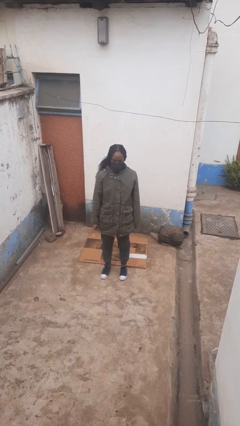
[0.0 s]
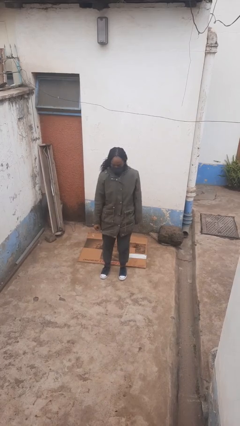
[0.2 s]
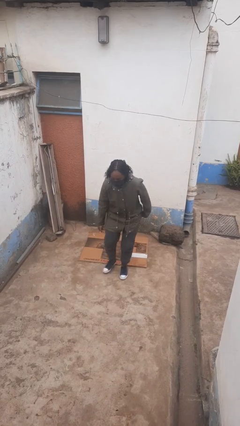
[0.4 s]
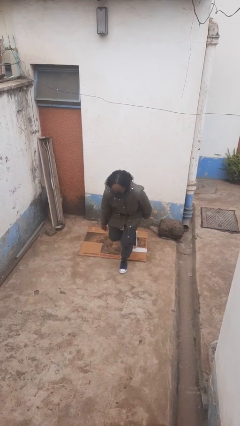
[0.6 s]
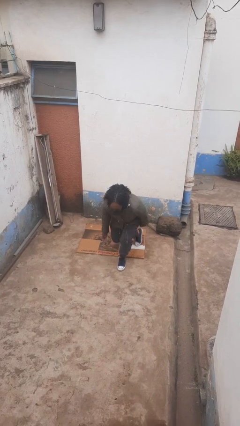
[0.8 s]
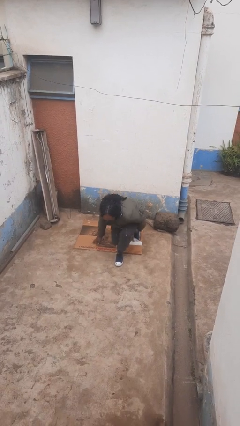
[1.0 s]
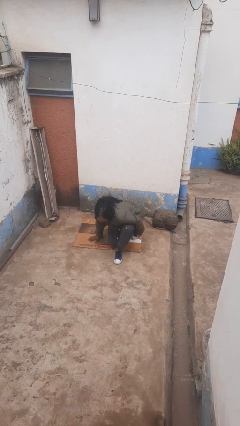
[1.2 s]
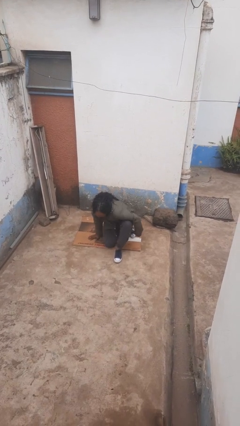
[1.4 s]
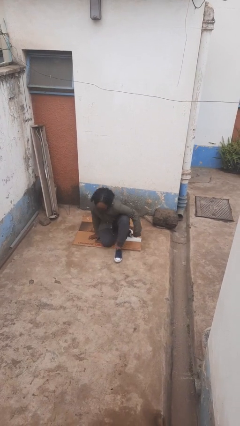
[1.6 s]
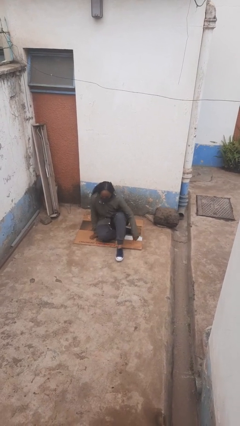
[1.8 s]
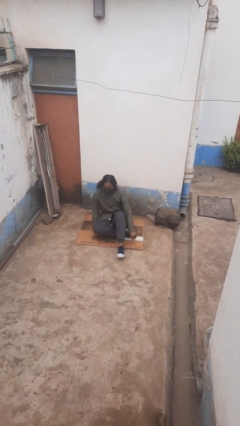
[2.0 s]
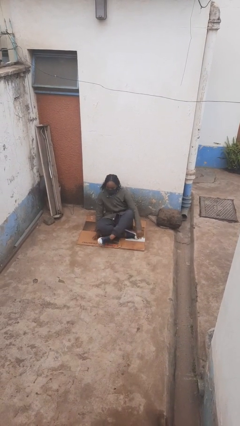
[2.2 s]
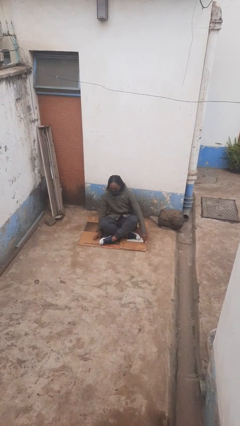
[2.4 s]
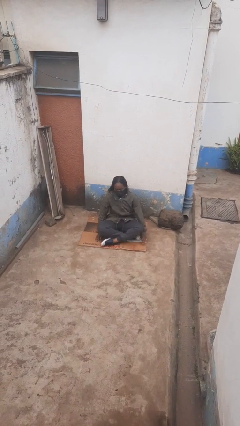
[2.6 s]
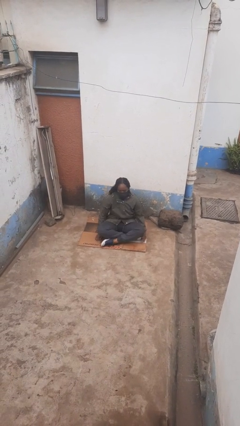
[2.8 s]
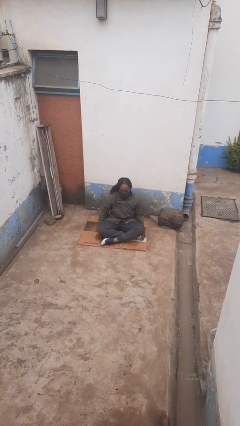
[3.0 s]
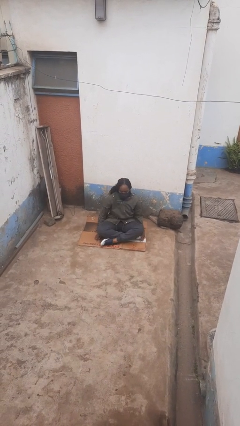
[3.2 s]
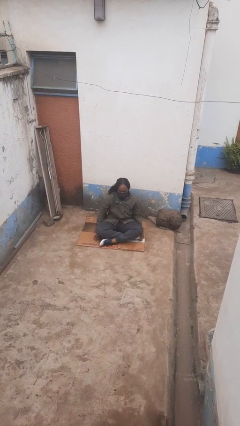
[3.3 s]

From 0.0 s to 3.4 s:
person sits crisscross

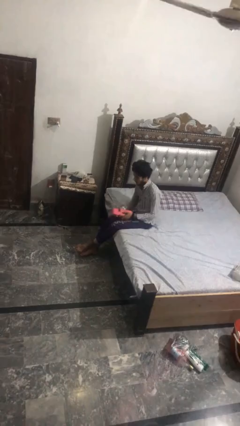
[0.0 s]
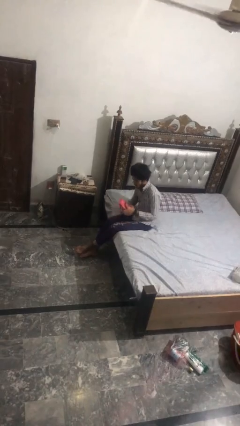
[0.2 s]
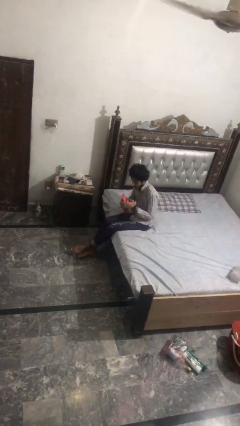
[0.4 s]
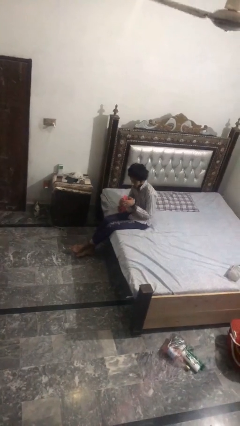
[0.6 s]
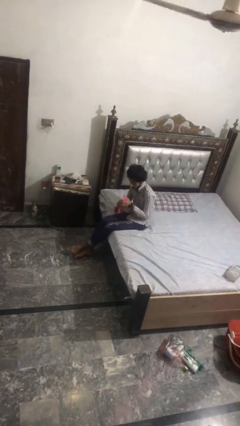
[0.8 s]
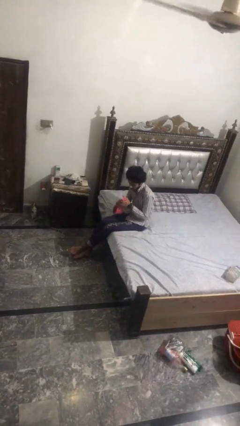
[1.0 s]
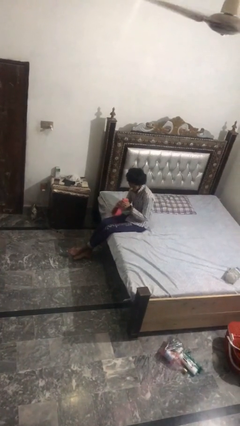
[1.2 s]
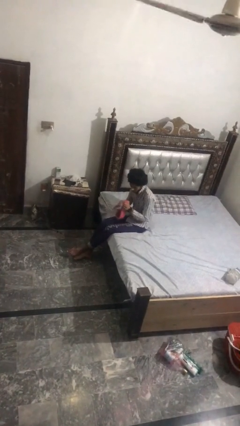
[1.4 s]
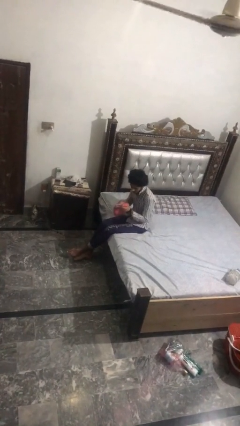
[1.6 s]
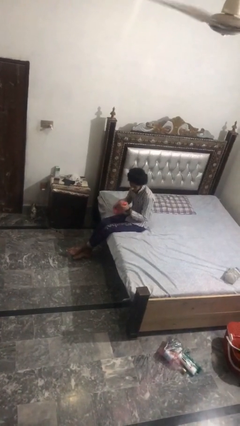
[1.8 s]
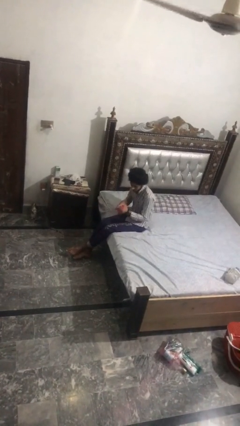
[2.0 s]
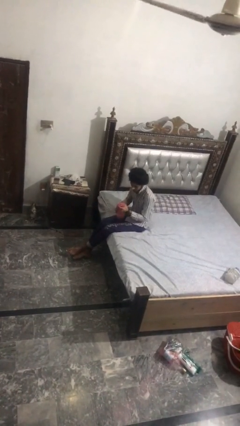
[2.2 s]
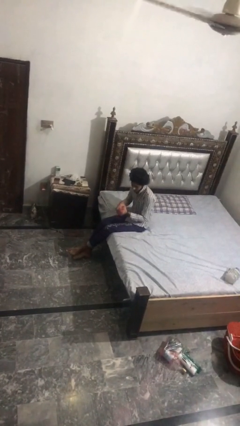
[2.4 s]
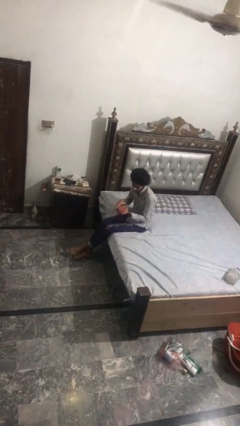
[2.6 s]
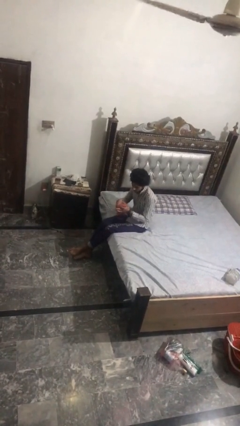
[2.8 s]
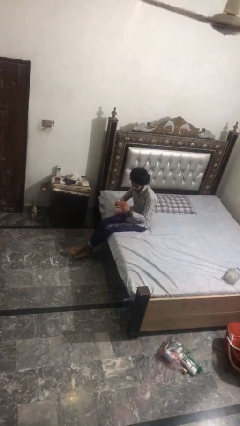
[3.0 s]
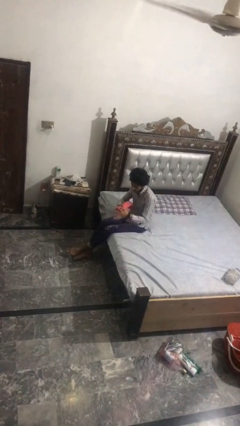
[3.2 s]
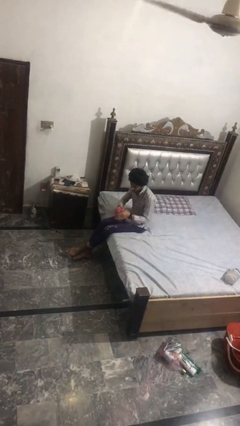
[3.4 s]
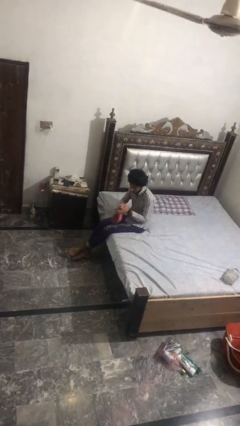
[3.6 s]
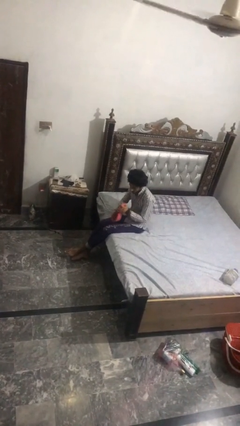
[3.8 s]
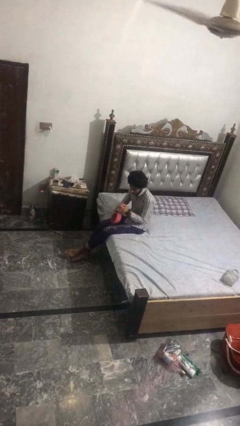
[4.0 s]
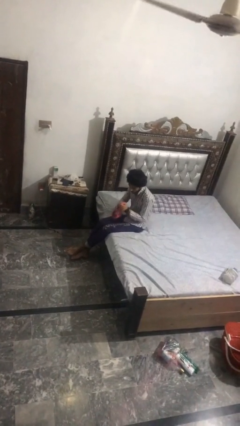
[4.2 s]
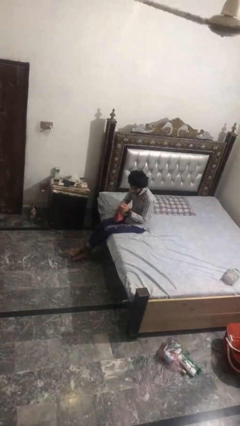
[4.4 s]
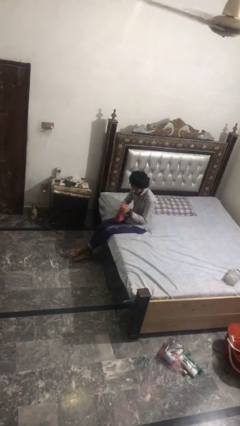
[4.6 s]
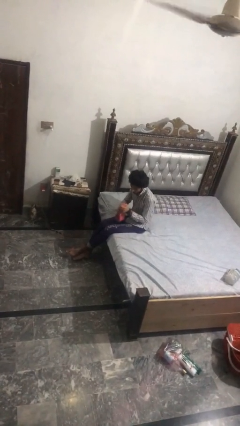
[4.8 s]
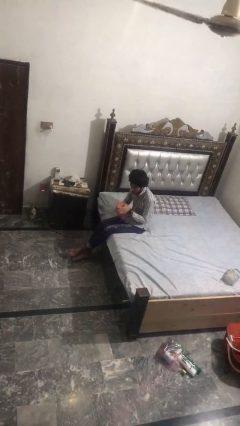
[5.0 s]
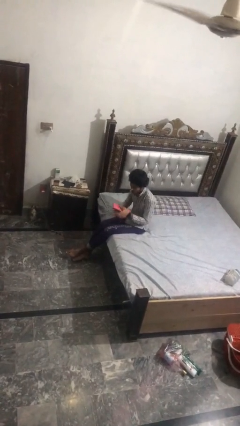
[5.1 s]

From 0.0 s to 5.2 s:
person squeezes object

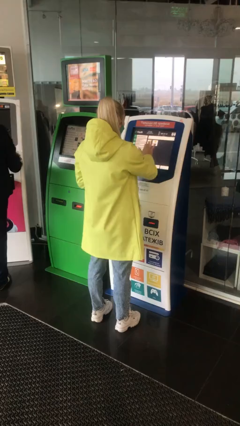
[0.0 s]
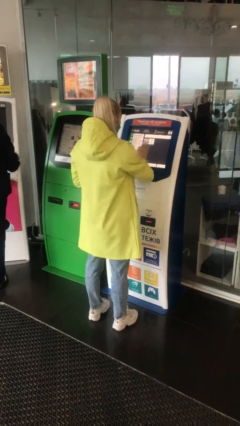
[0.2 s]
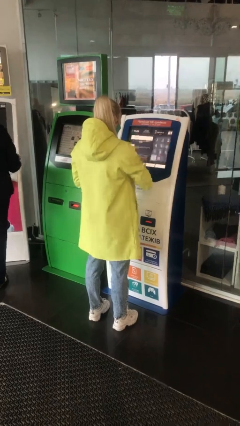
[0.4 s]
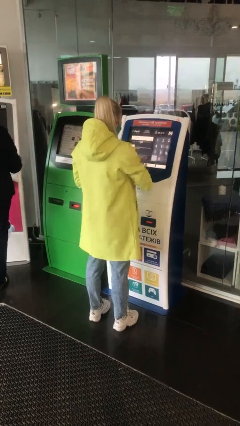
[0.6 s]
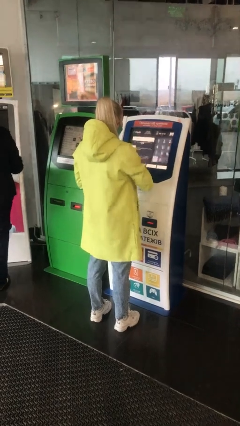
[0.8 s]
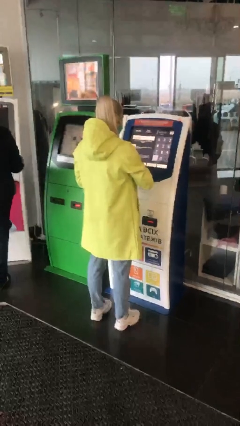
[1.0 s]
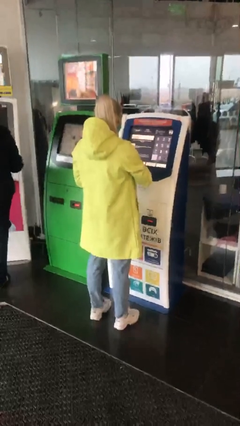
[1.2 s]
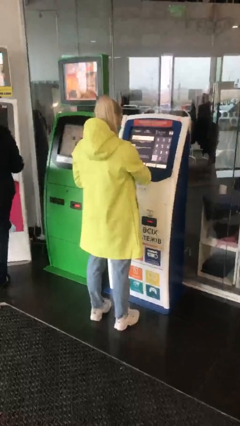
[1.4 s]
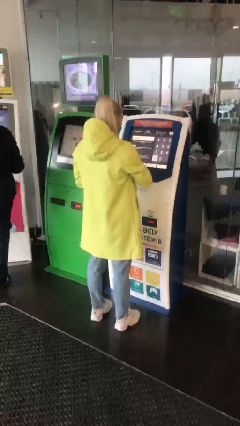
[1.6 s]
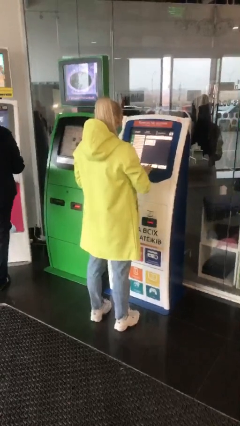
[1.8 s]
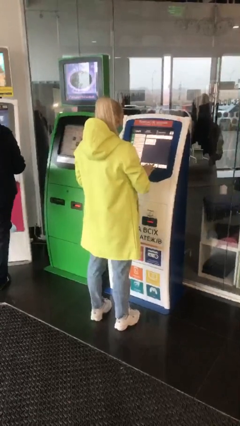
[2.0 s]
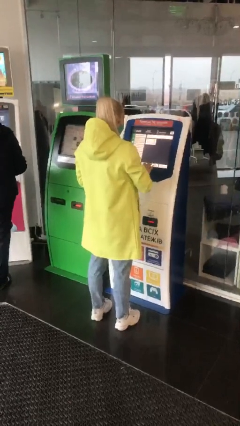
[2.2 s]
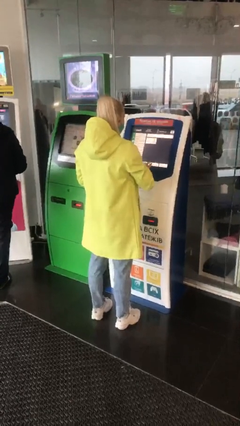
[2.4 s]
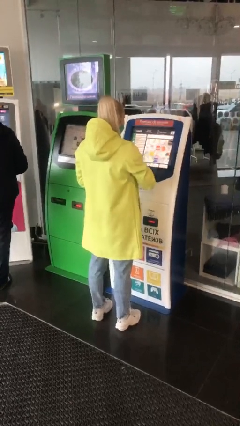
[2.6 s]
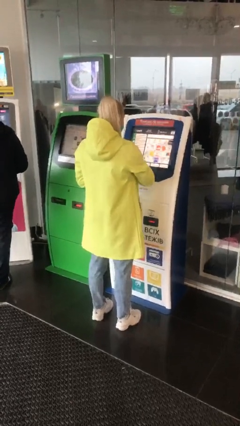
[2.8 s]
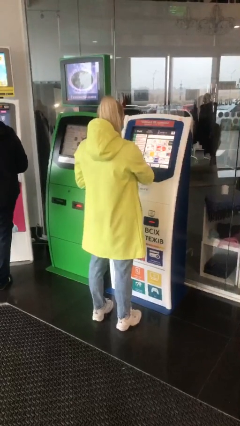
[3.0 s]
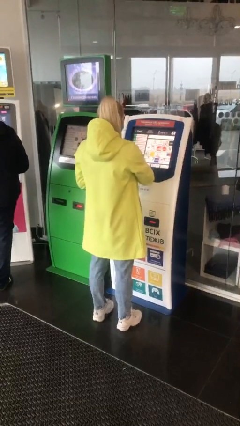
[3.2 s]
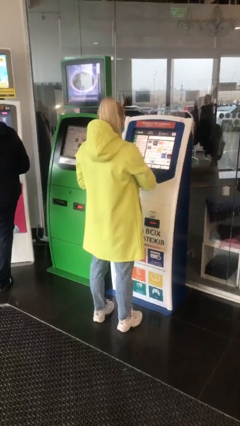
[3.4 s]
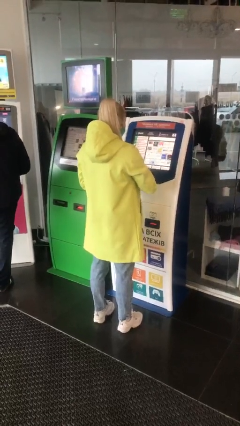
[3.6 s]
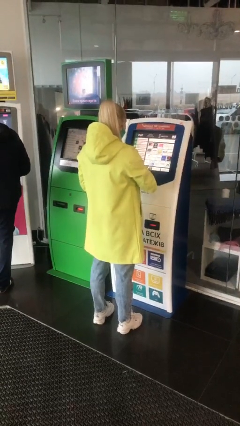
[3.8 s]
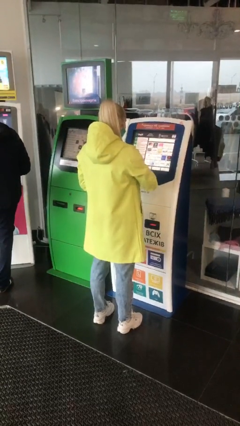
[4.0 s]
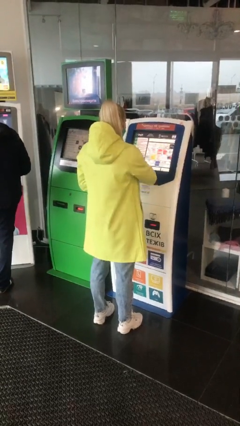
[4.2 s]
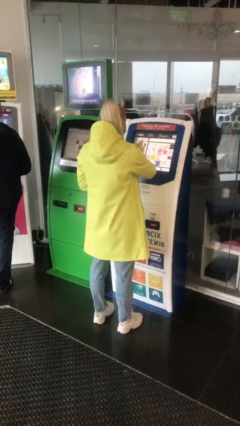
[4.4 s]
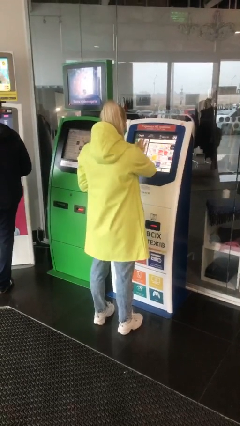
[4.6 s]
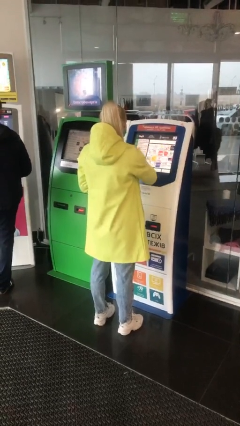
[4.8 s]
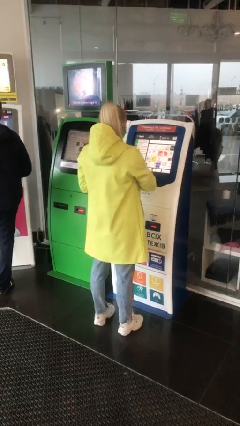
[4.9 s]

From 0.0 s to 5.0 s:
person purchases from machine

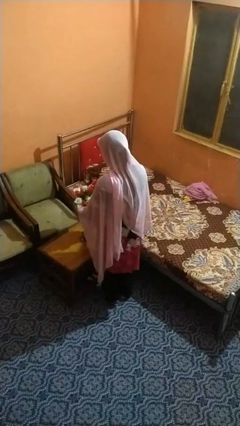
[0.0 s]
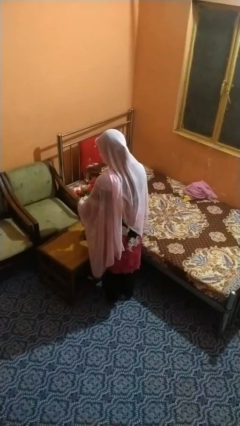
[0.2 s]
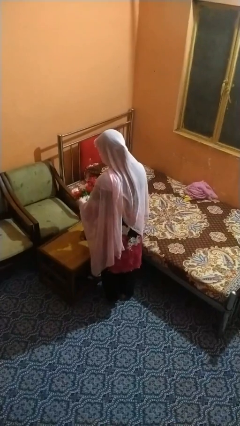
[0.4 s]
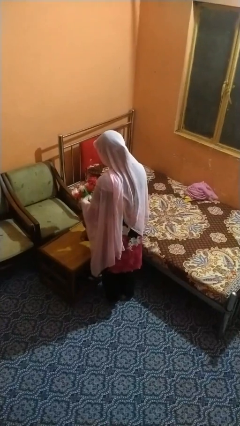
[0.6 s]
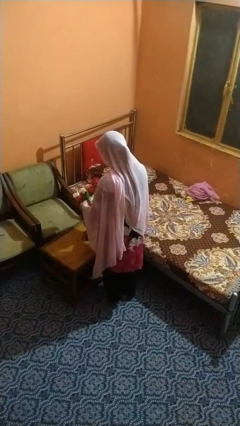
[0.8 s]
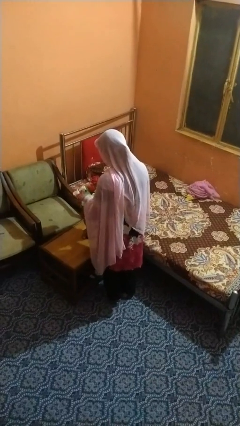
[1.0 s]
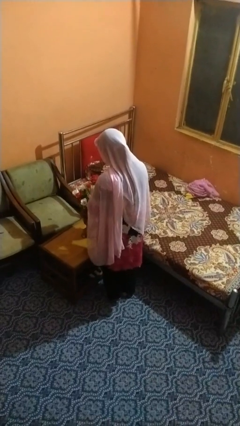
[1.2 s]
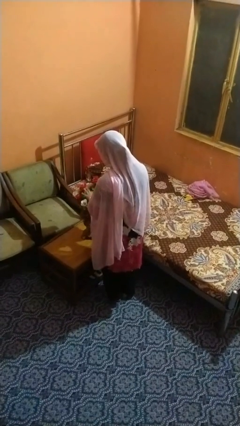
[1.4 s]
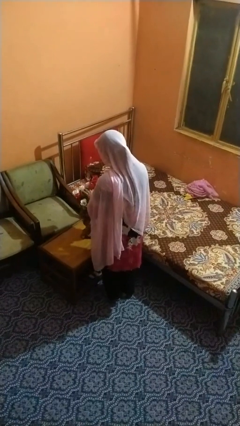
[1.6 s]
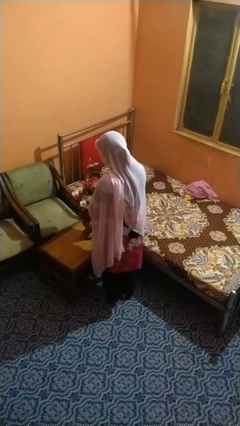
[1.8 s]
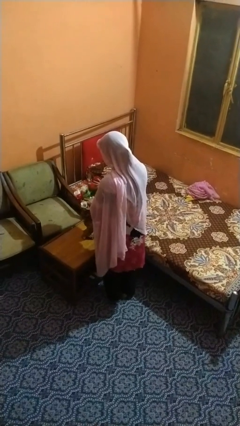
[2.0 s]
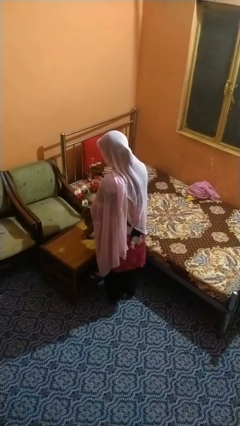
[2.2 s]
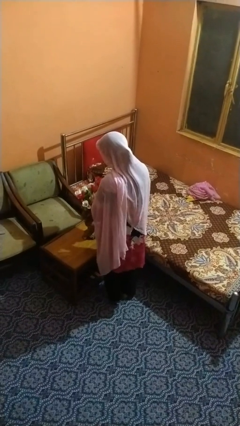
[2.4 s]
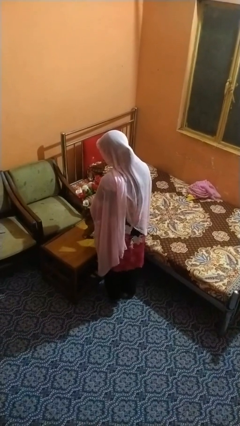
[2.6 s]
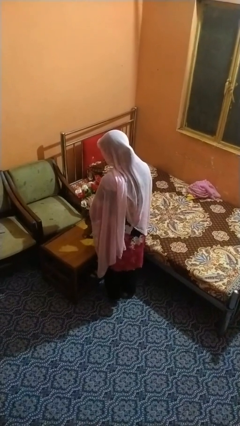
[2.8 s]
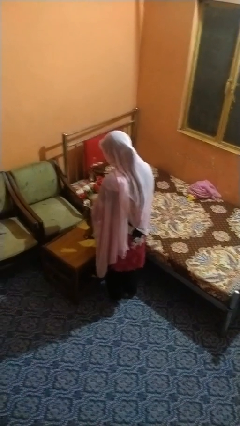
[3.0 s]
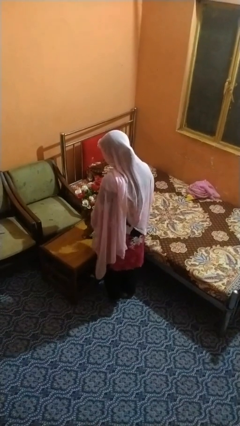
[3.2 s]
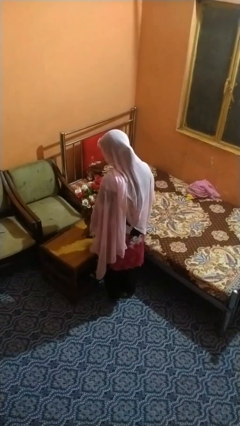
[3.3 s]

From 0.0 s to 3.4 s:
person arranges flowers in vase

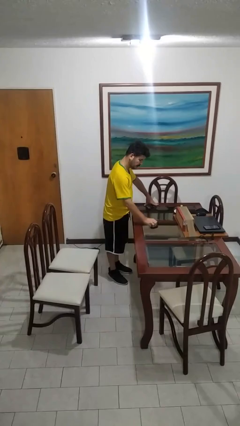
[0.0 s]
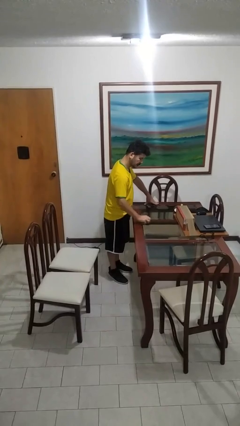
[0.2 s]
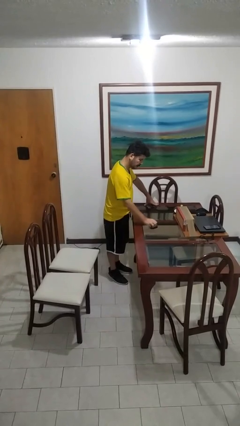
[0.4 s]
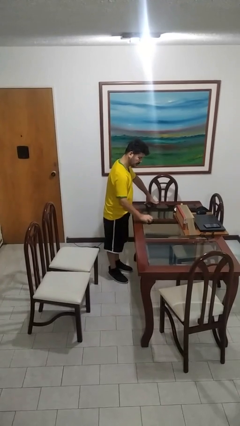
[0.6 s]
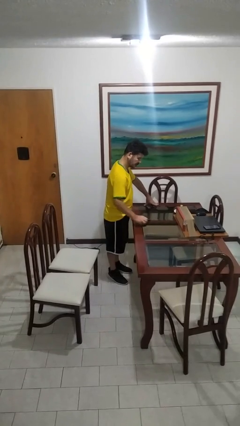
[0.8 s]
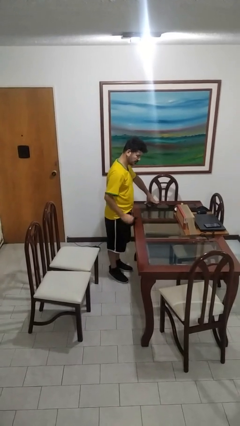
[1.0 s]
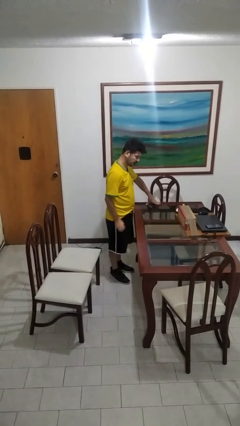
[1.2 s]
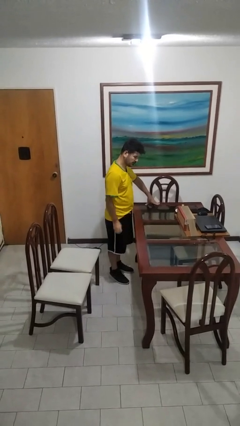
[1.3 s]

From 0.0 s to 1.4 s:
person cleans table with rag
